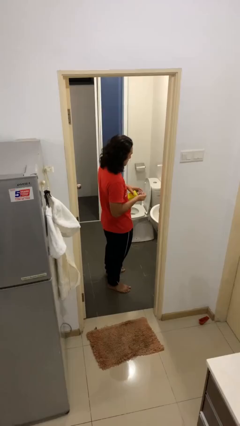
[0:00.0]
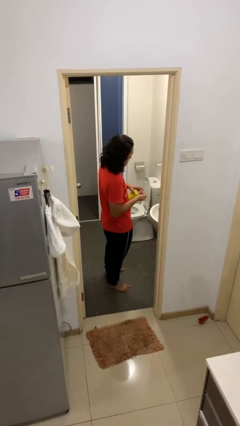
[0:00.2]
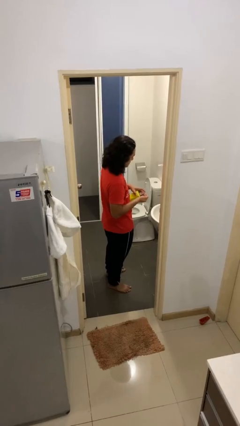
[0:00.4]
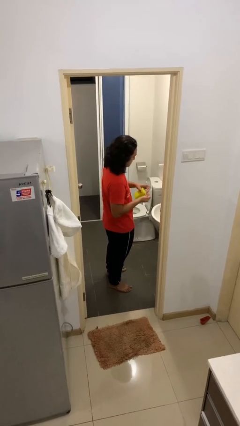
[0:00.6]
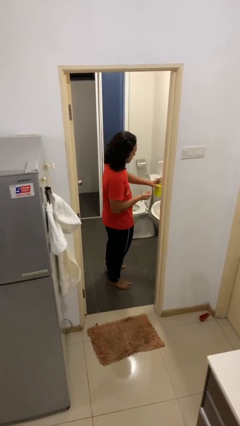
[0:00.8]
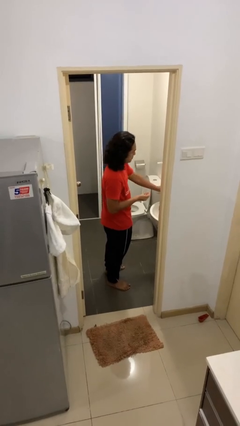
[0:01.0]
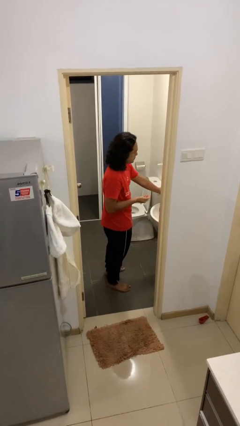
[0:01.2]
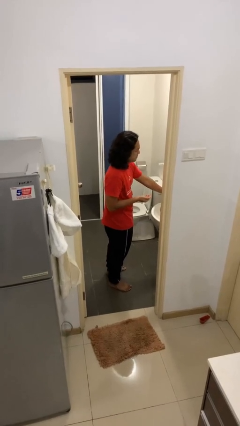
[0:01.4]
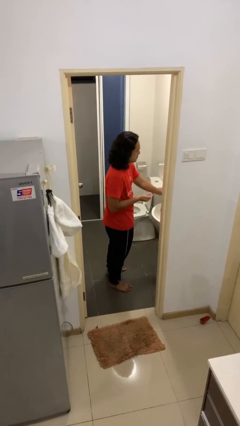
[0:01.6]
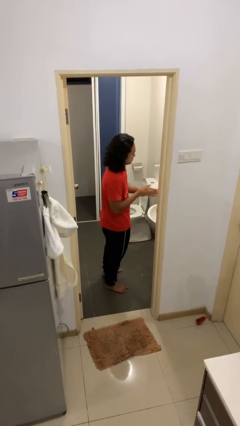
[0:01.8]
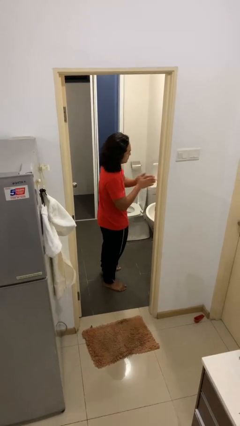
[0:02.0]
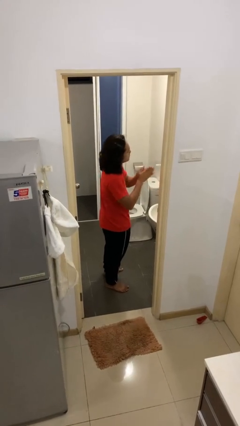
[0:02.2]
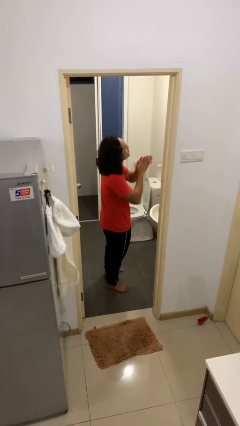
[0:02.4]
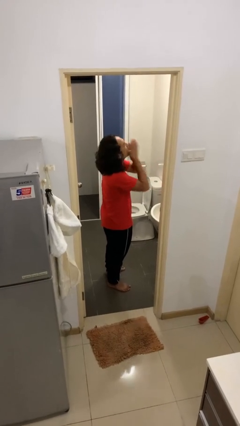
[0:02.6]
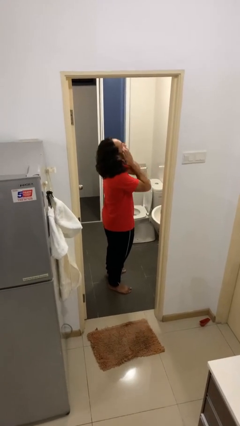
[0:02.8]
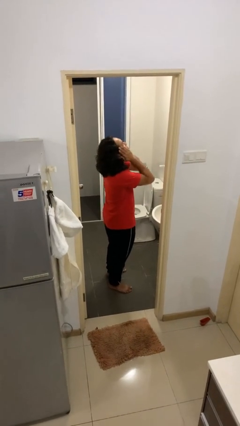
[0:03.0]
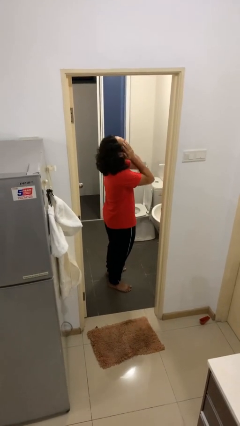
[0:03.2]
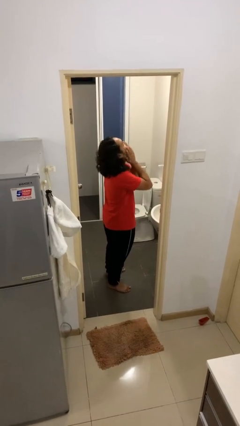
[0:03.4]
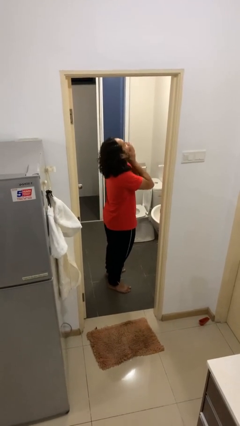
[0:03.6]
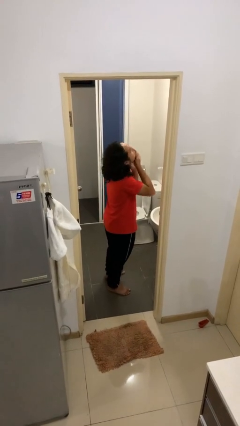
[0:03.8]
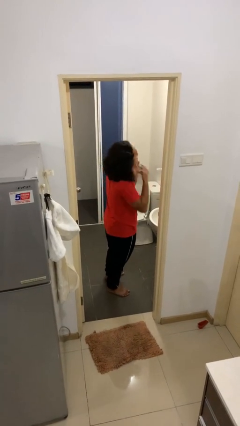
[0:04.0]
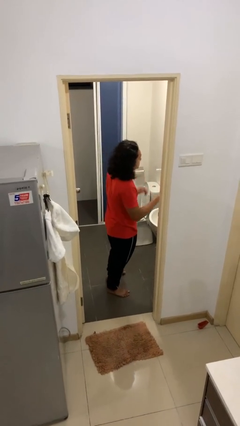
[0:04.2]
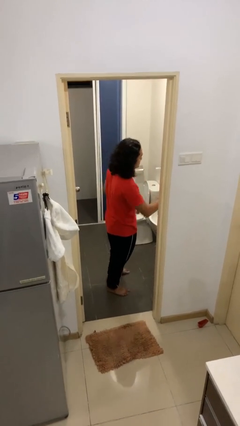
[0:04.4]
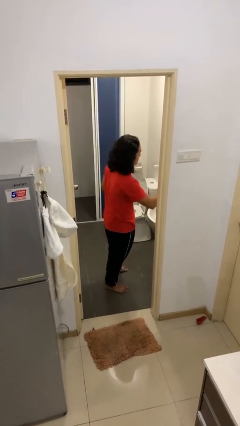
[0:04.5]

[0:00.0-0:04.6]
person applies shaving cream

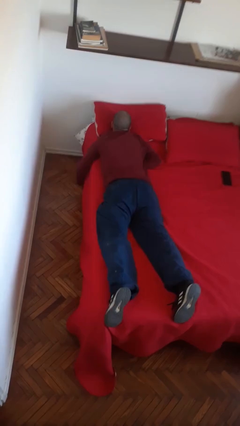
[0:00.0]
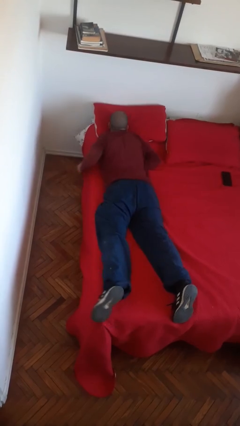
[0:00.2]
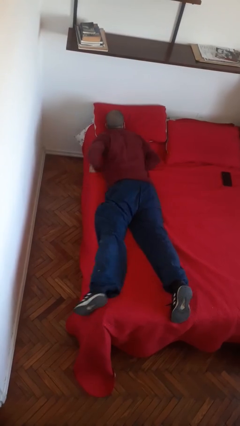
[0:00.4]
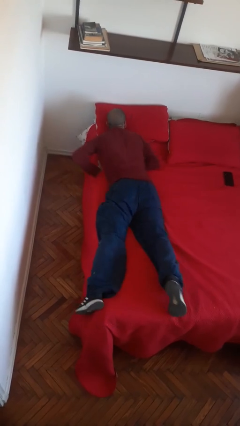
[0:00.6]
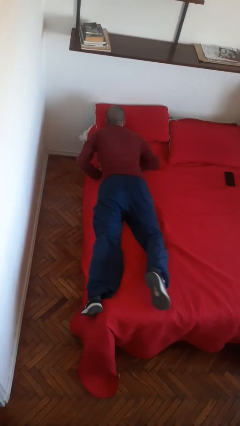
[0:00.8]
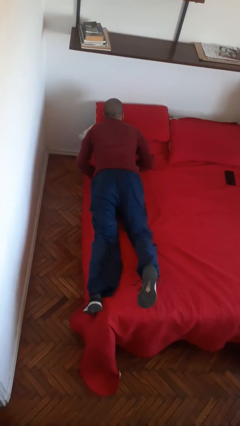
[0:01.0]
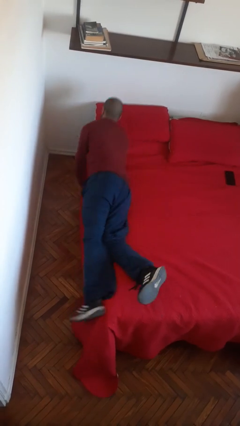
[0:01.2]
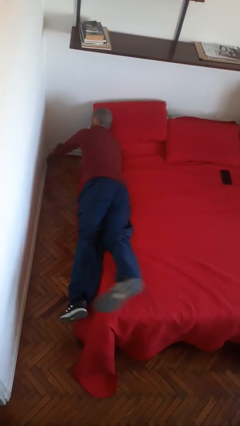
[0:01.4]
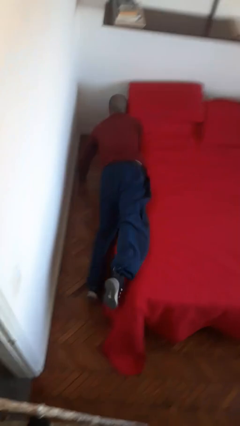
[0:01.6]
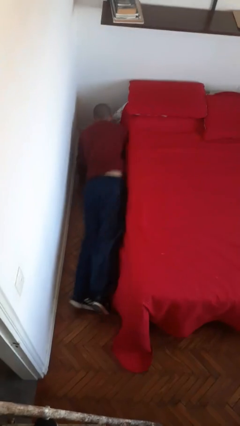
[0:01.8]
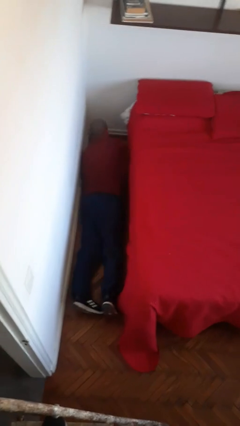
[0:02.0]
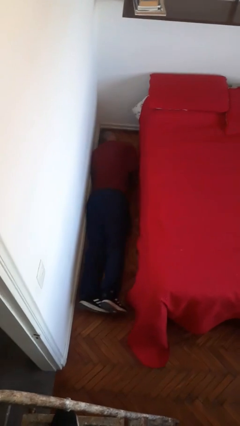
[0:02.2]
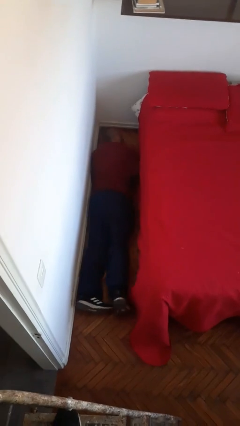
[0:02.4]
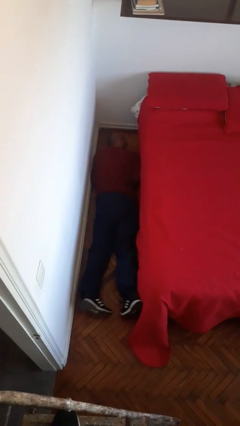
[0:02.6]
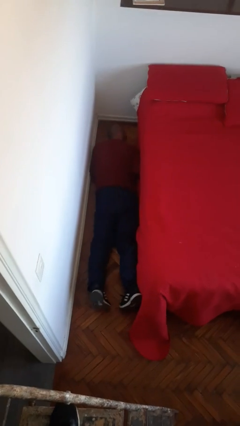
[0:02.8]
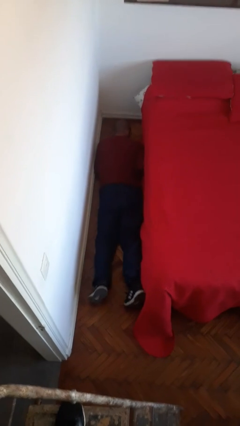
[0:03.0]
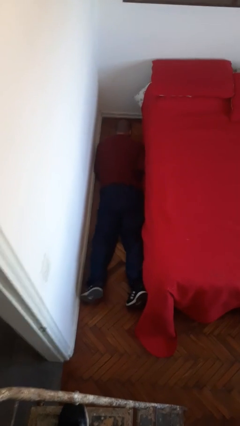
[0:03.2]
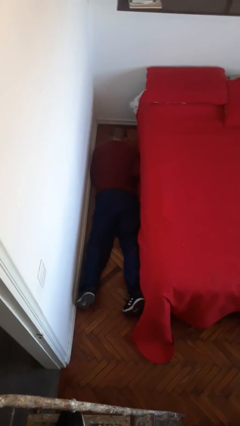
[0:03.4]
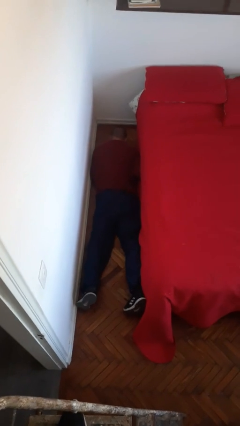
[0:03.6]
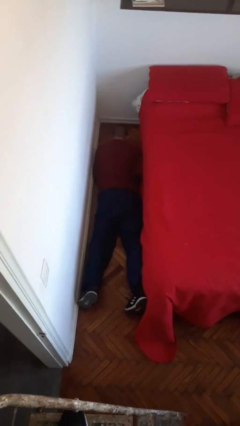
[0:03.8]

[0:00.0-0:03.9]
person falls from bed

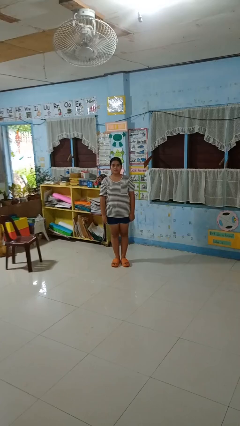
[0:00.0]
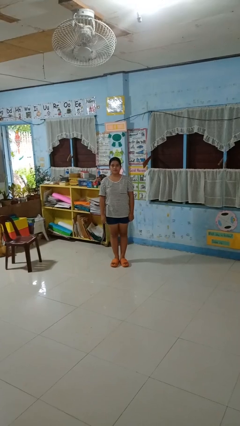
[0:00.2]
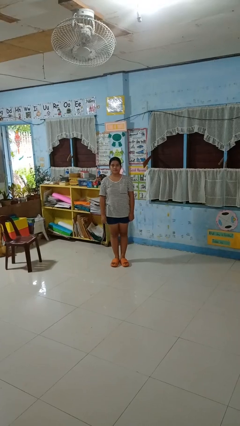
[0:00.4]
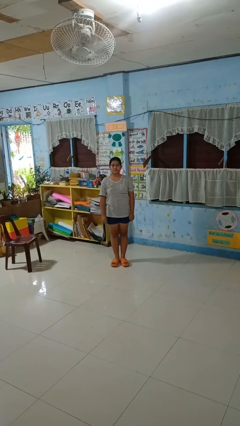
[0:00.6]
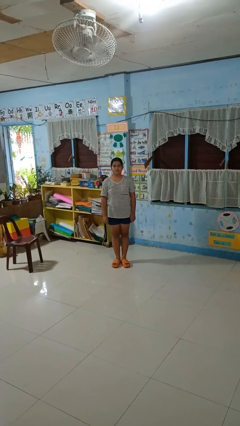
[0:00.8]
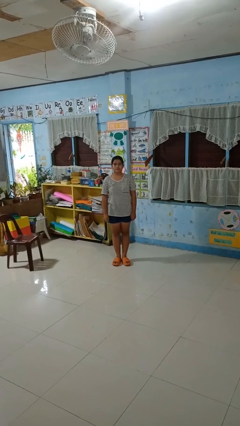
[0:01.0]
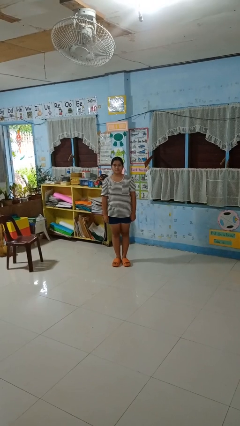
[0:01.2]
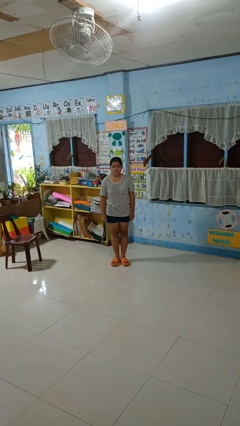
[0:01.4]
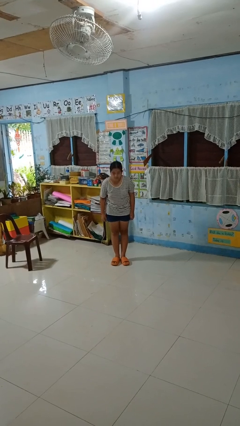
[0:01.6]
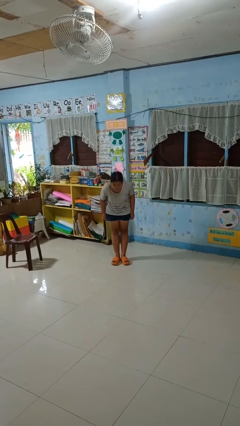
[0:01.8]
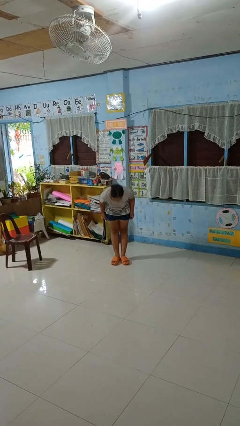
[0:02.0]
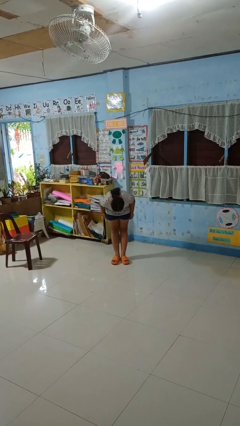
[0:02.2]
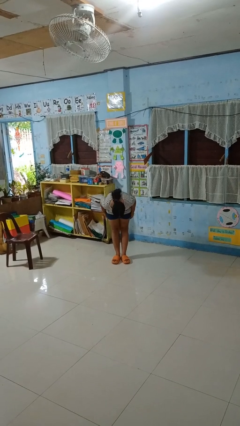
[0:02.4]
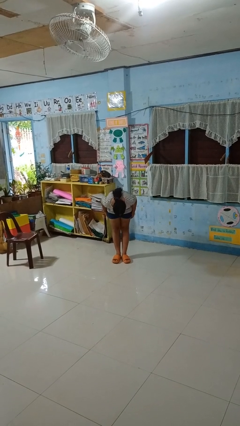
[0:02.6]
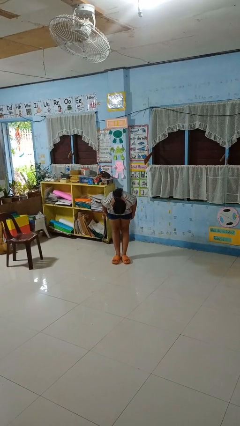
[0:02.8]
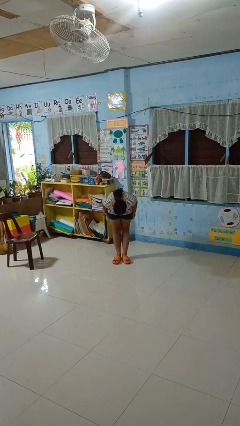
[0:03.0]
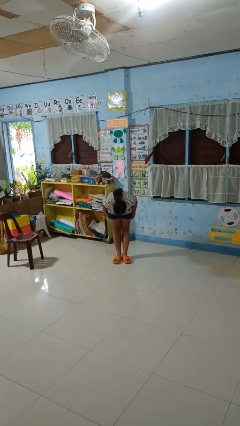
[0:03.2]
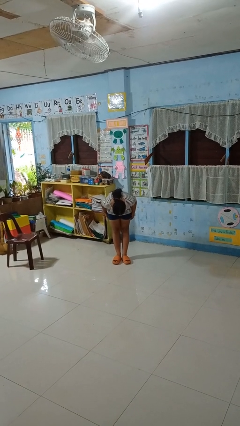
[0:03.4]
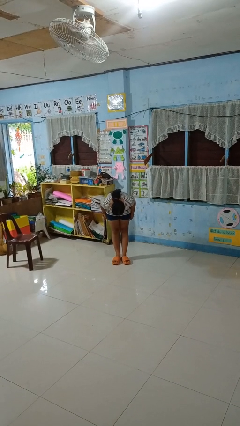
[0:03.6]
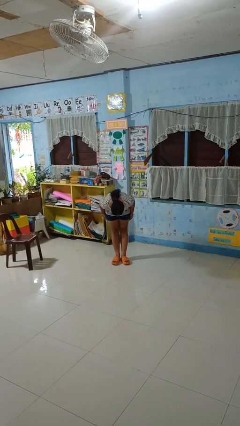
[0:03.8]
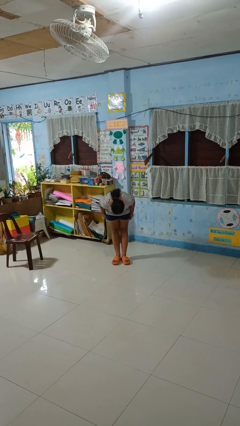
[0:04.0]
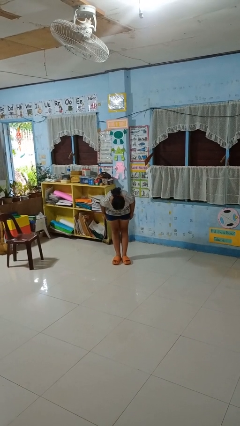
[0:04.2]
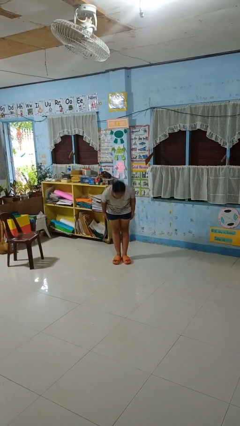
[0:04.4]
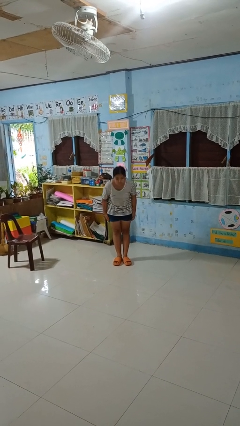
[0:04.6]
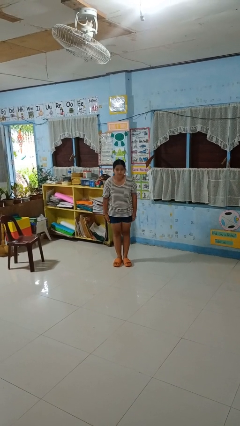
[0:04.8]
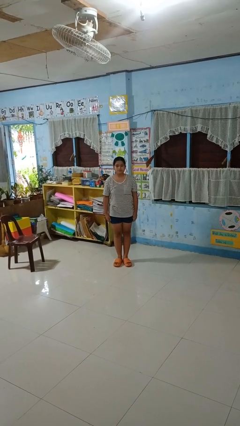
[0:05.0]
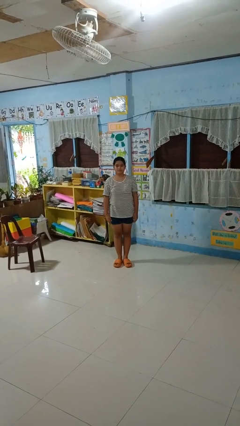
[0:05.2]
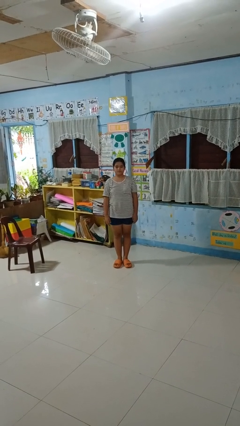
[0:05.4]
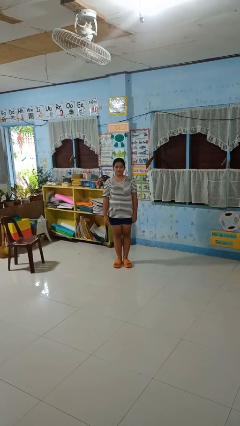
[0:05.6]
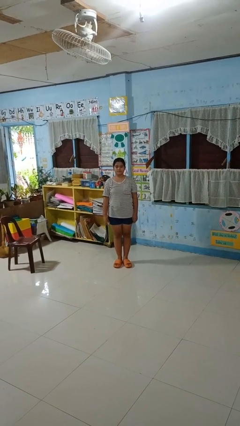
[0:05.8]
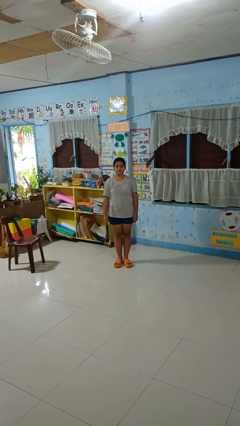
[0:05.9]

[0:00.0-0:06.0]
person bows

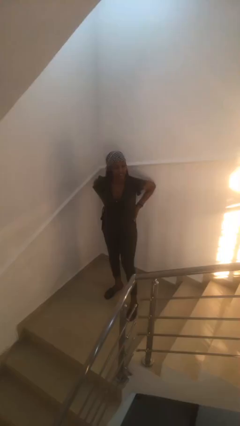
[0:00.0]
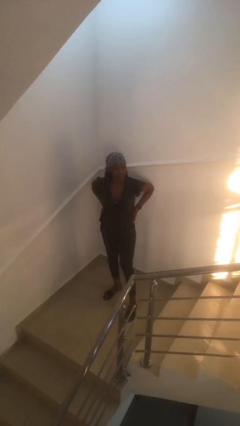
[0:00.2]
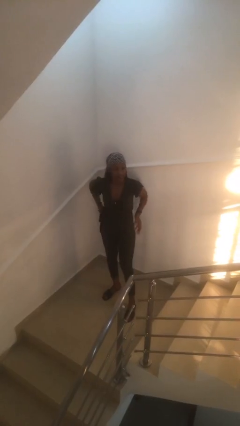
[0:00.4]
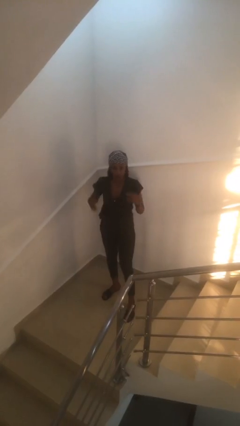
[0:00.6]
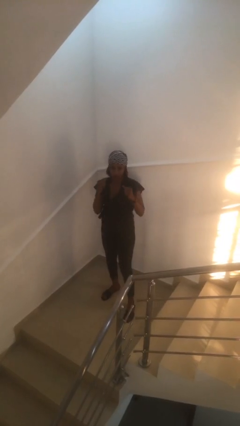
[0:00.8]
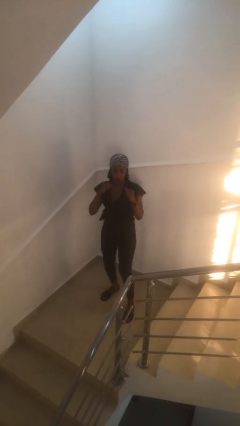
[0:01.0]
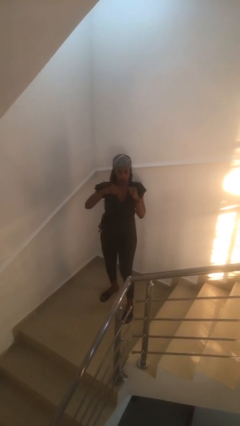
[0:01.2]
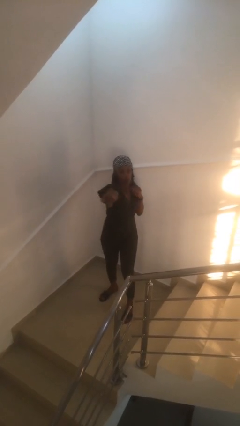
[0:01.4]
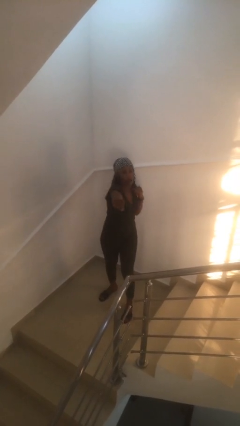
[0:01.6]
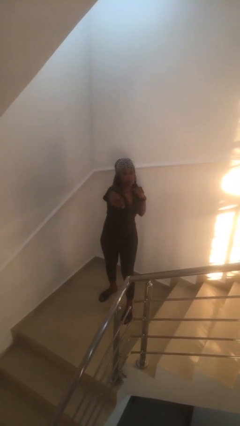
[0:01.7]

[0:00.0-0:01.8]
person punches

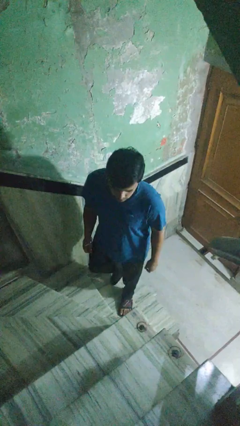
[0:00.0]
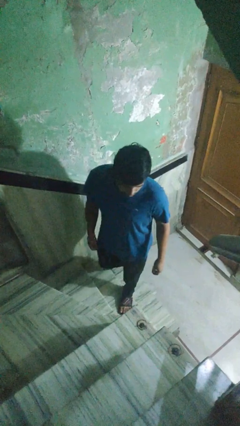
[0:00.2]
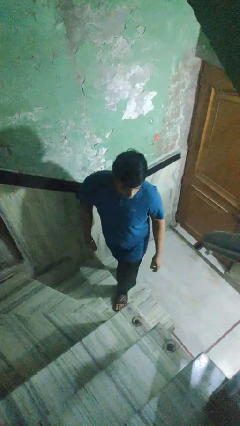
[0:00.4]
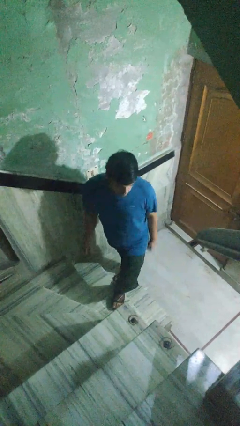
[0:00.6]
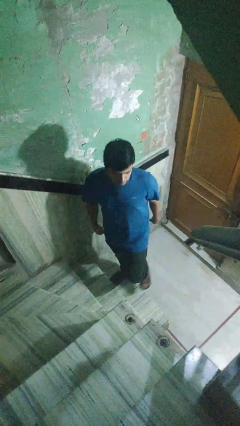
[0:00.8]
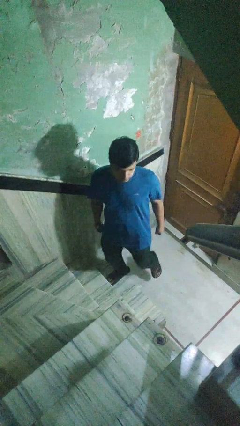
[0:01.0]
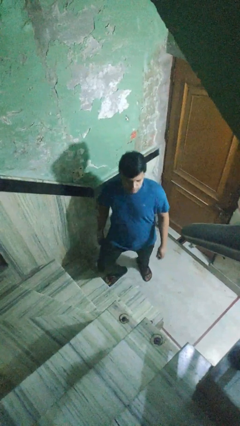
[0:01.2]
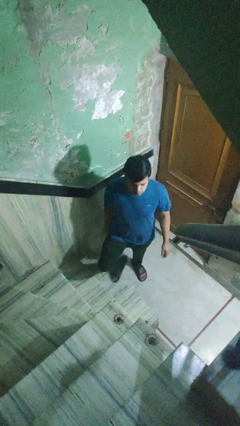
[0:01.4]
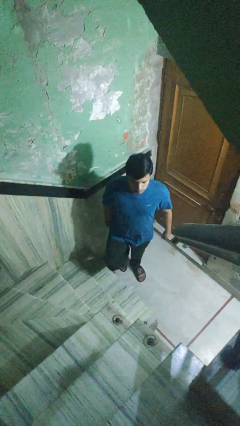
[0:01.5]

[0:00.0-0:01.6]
person climbs down stairs
